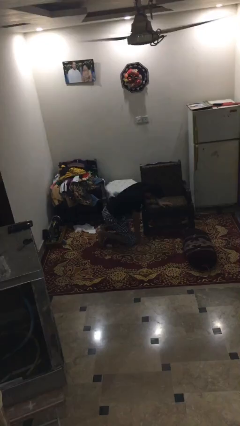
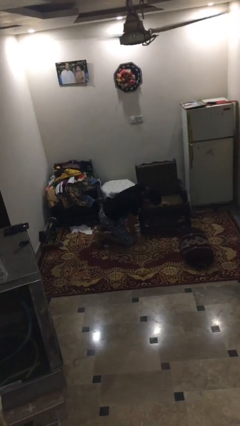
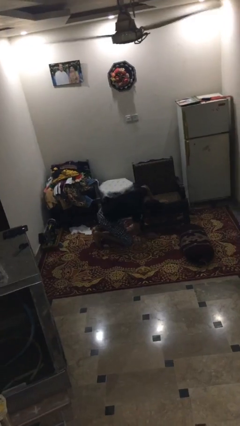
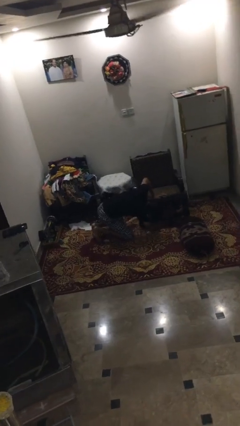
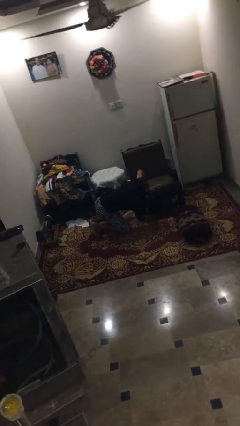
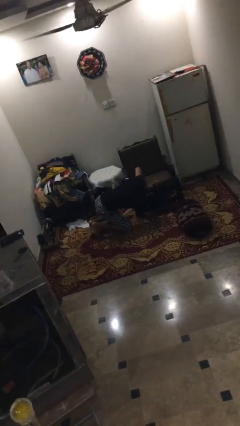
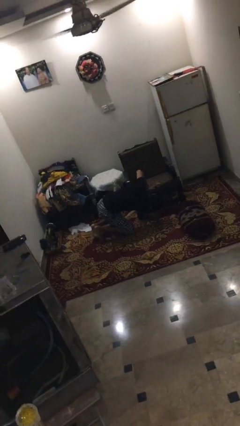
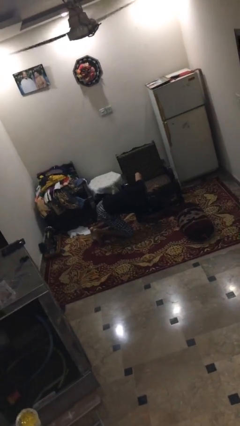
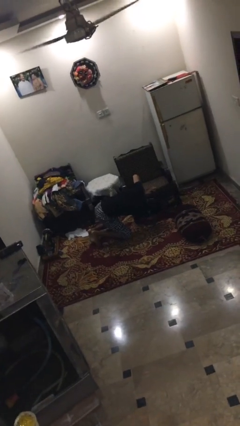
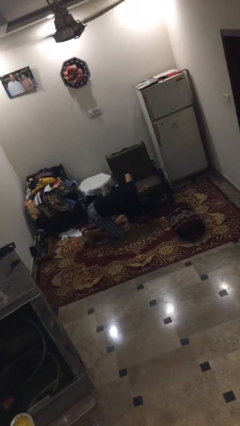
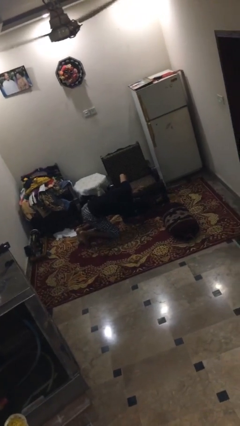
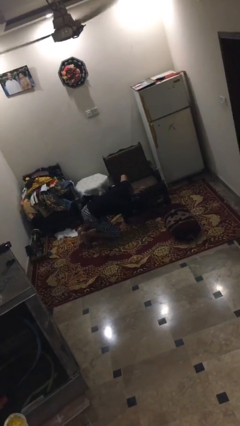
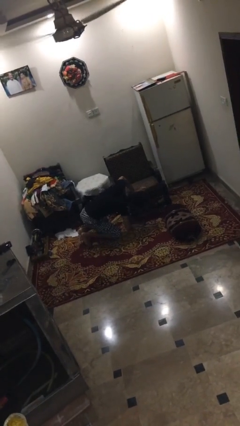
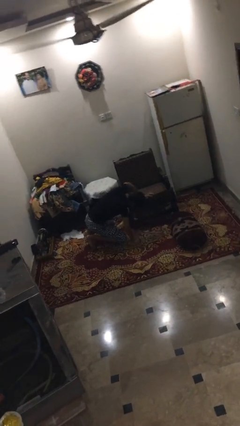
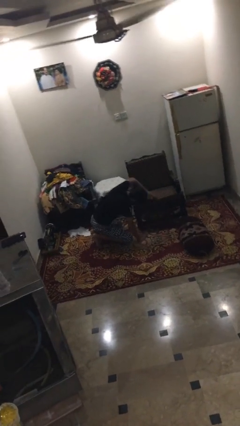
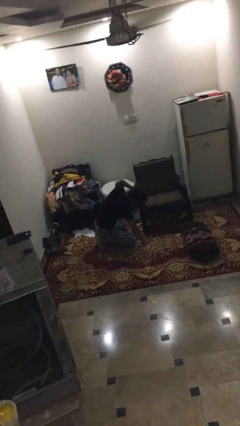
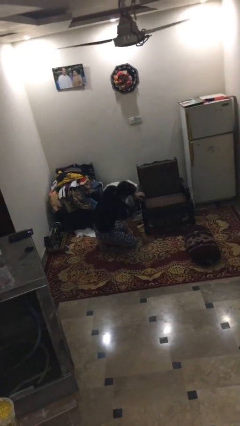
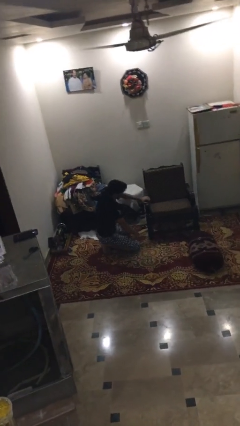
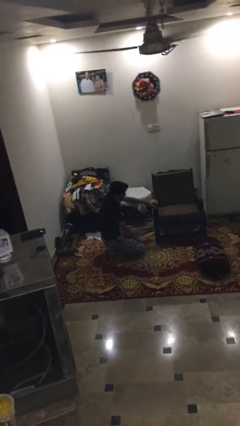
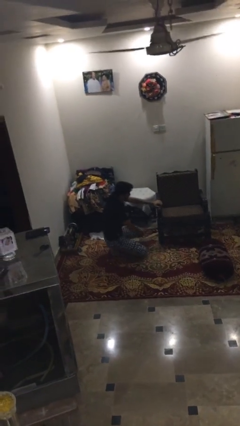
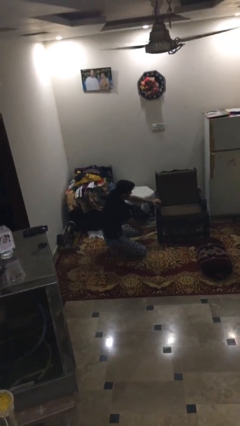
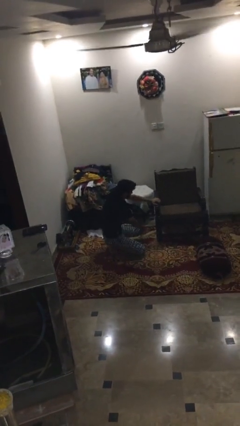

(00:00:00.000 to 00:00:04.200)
person searches in couch

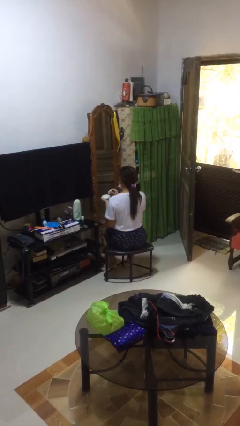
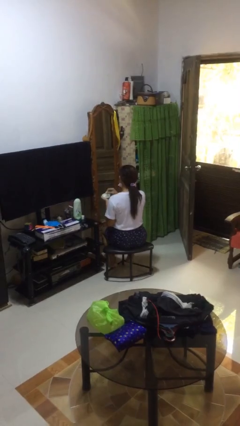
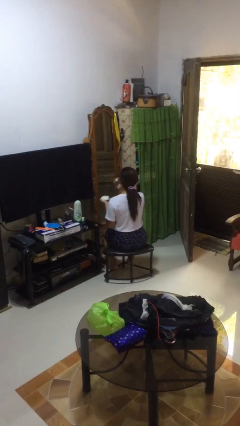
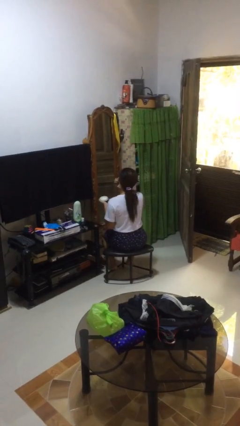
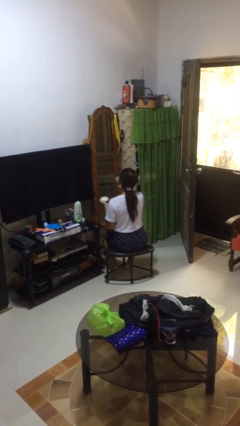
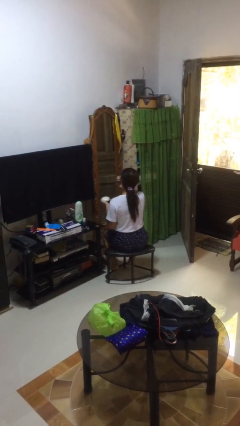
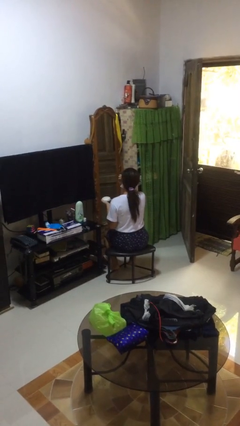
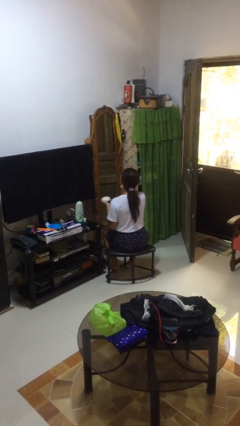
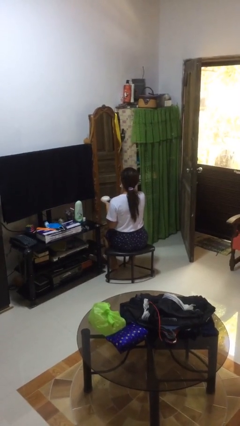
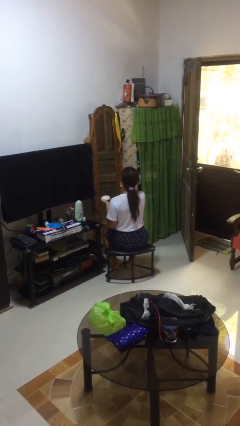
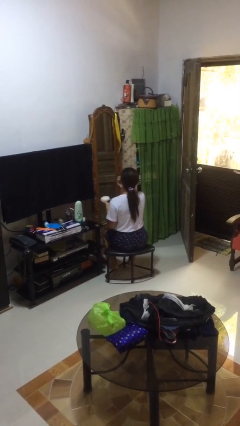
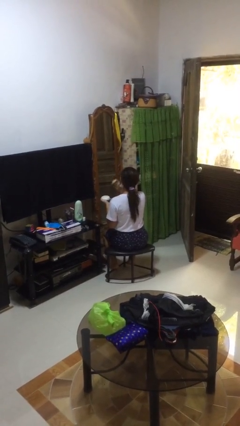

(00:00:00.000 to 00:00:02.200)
person applies foundation makeup

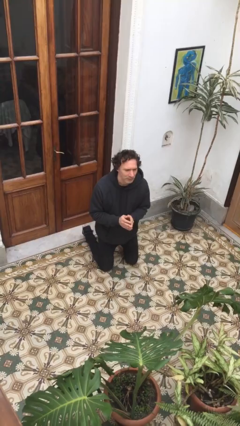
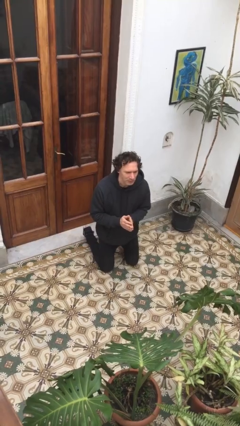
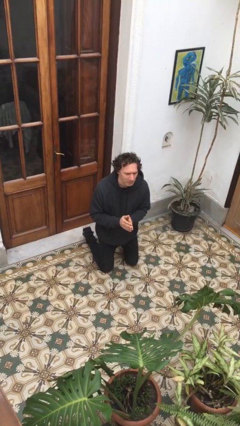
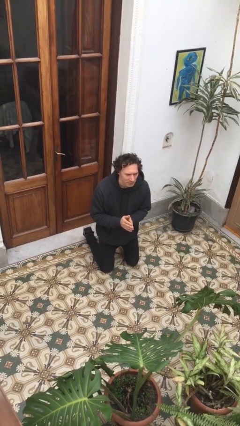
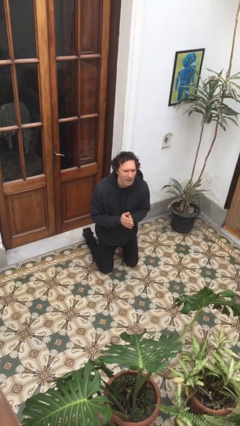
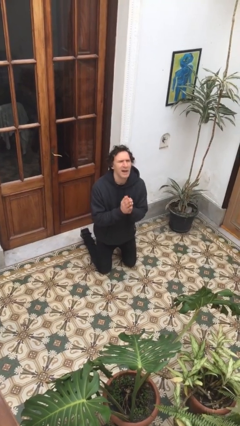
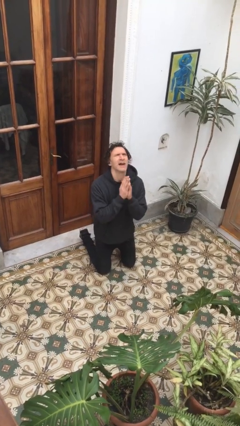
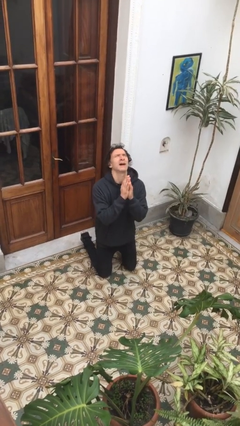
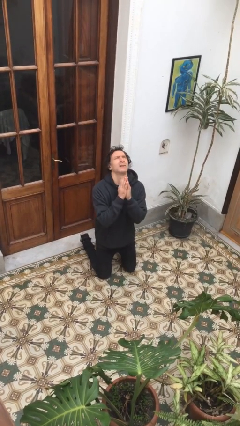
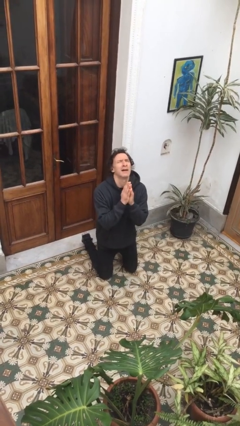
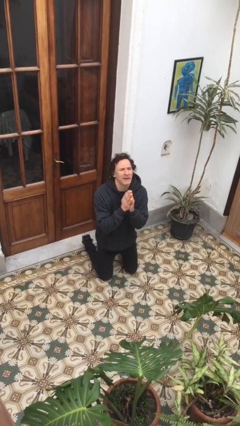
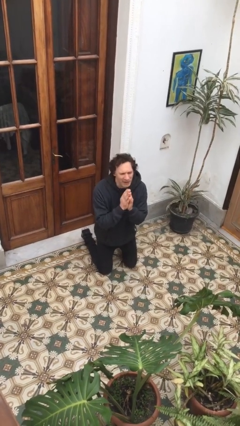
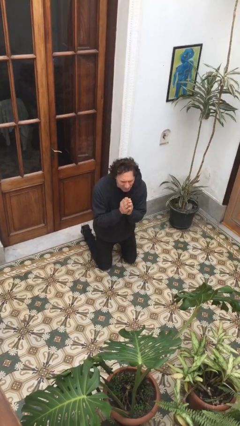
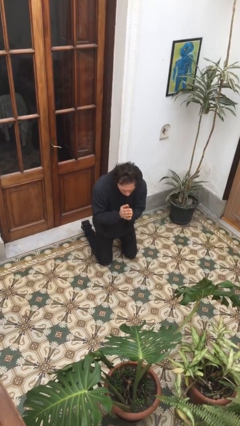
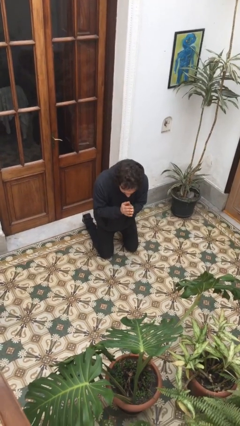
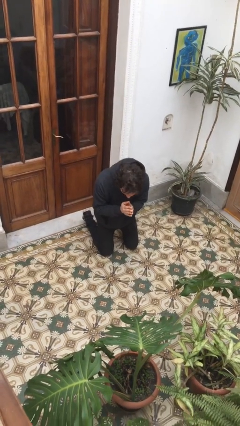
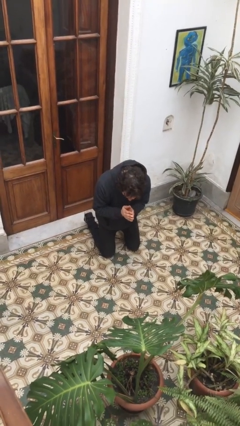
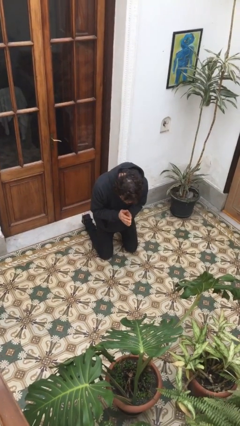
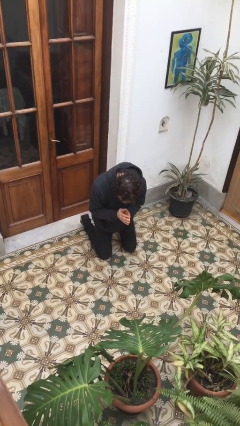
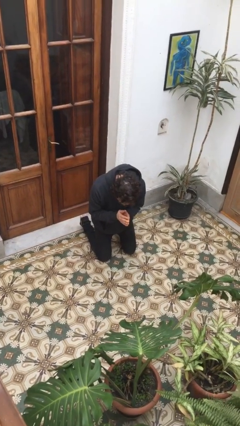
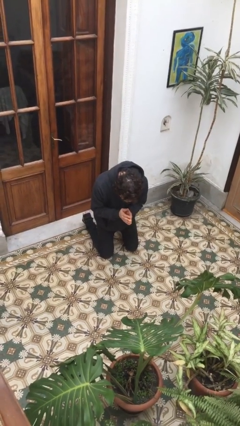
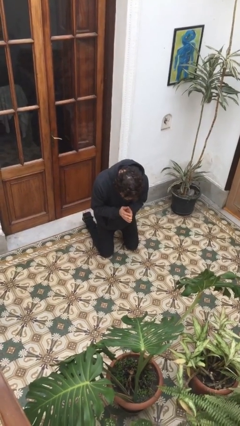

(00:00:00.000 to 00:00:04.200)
person prays

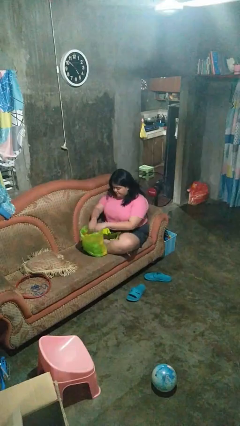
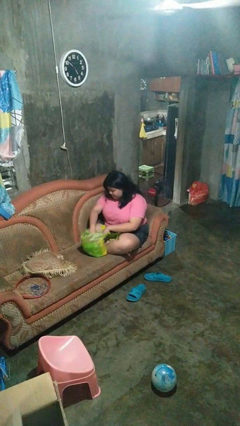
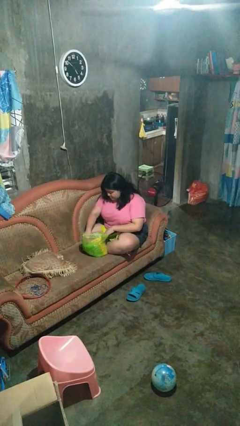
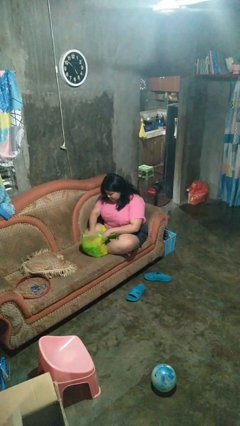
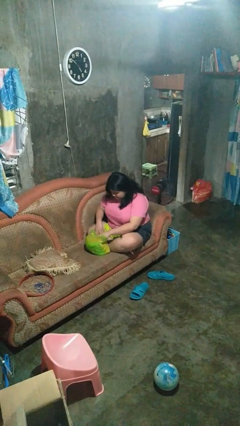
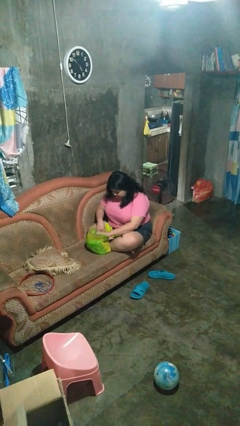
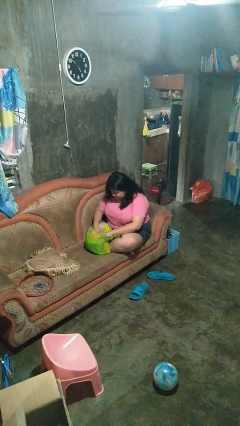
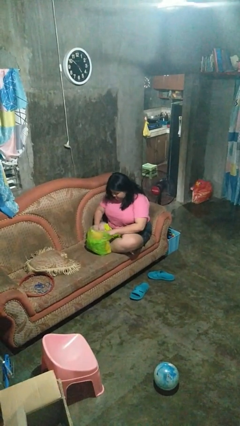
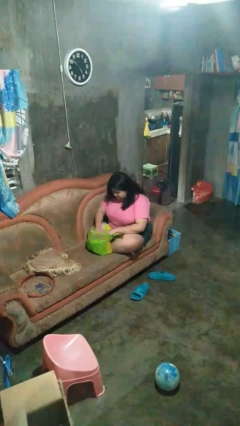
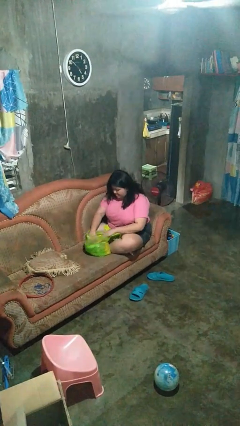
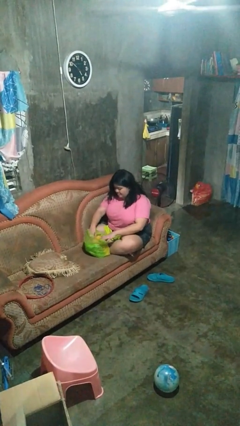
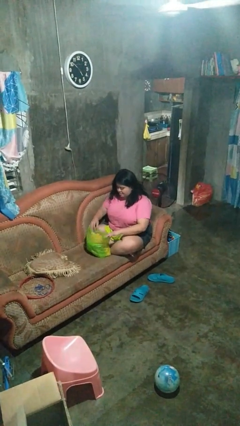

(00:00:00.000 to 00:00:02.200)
person searches in bag

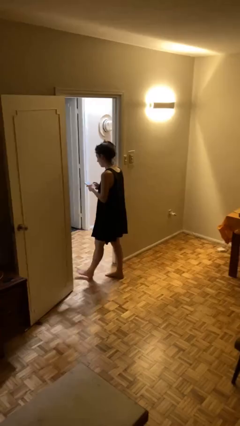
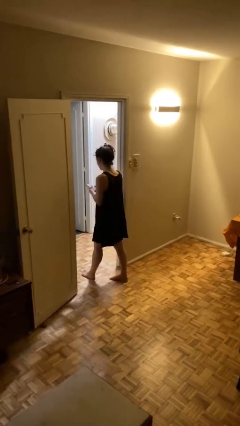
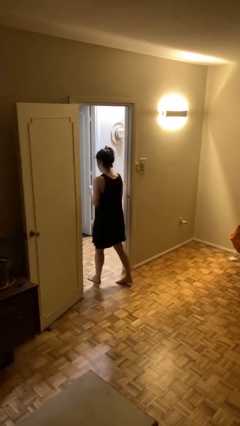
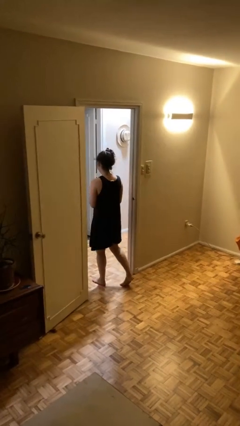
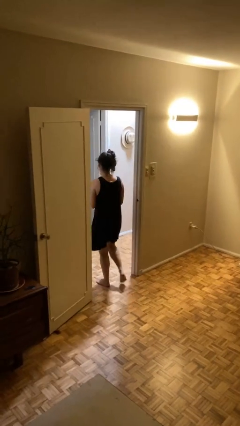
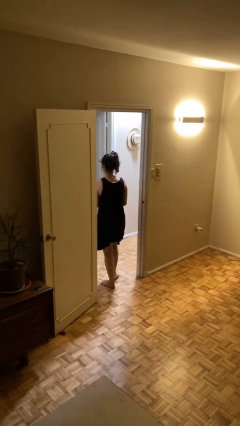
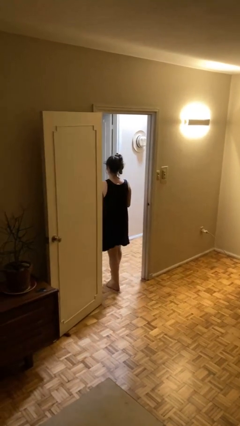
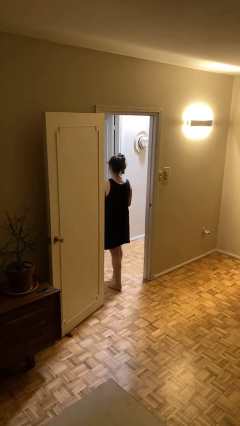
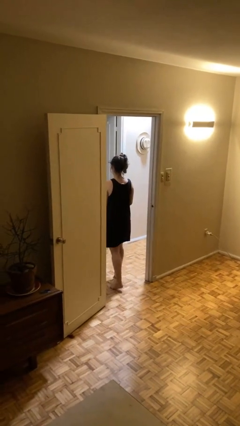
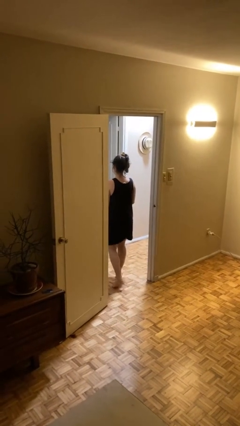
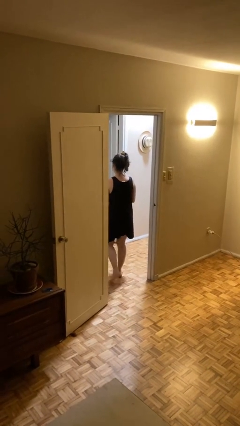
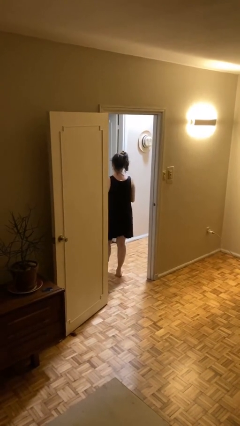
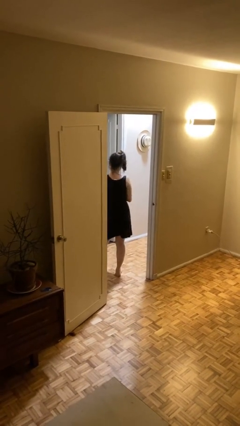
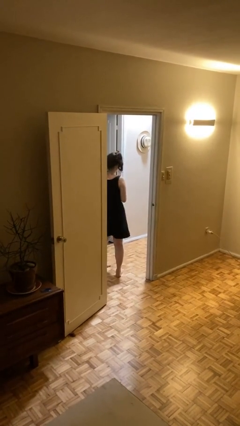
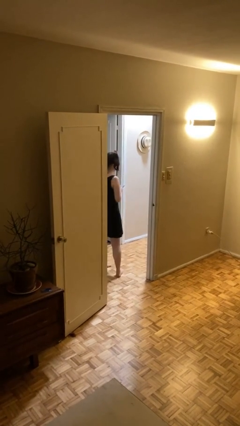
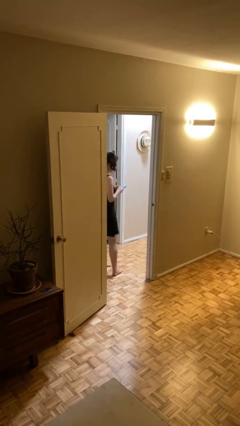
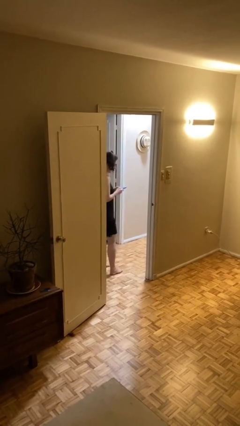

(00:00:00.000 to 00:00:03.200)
person exits scene through structure

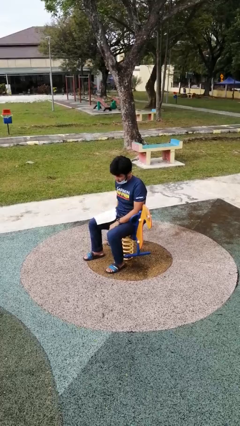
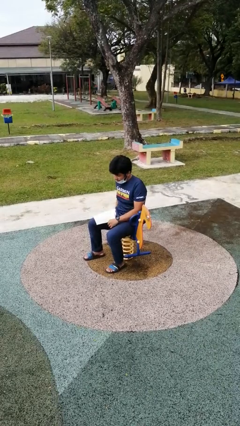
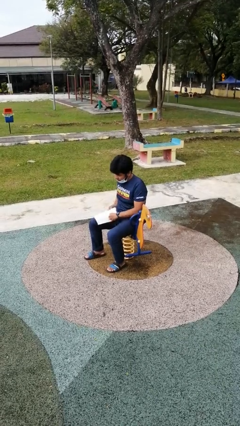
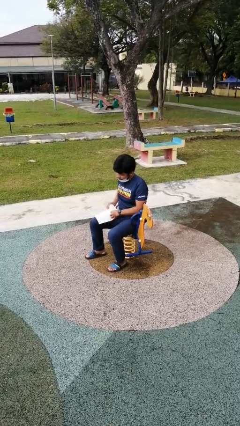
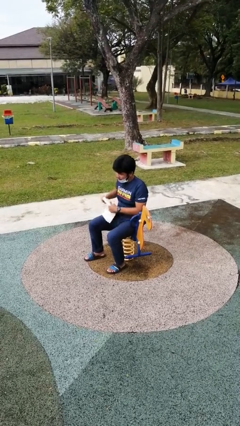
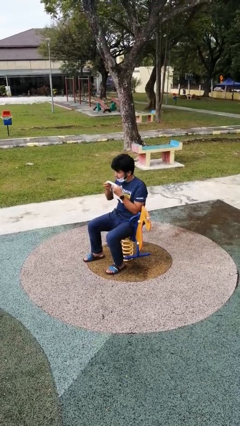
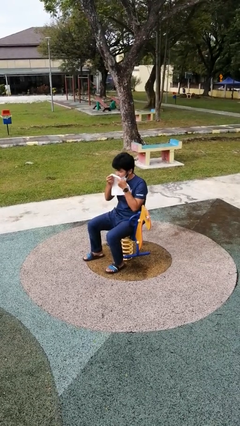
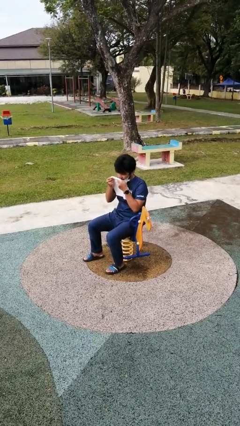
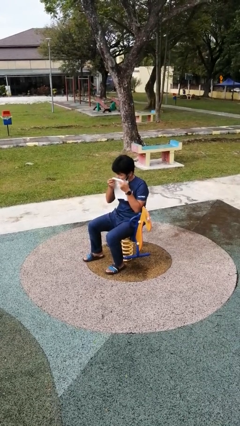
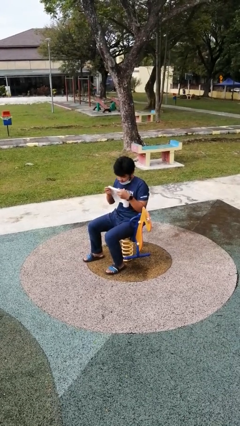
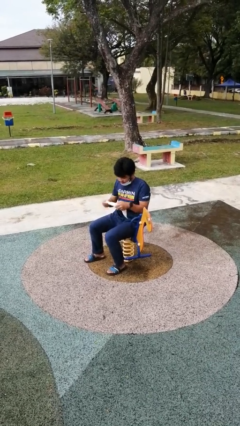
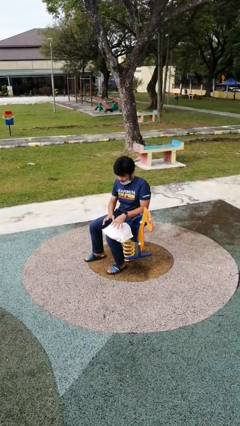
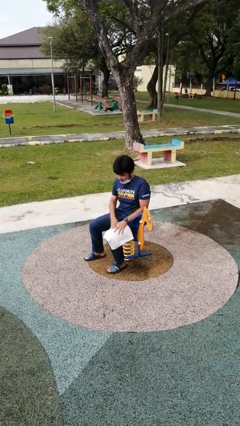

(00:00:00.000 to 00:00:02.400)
person wipes mouth with napkin
